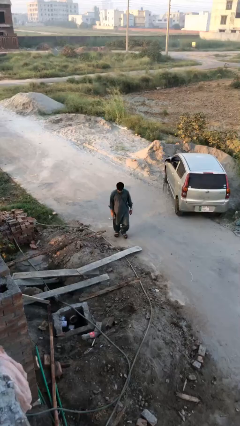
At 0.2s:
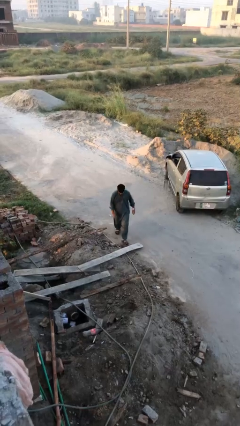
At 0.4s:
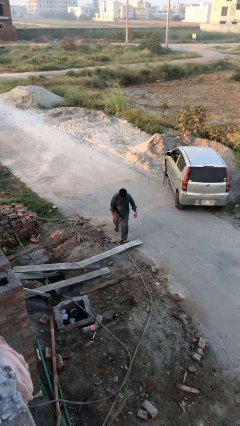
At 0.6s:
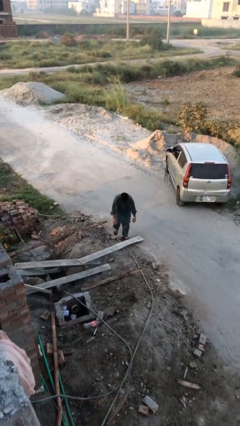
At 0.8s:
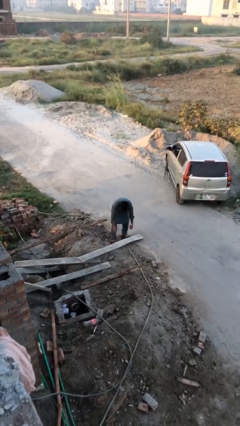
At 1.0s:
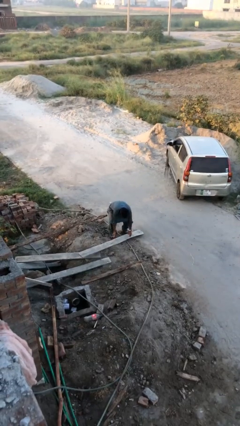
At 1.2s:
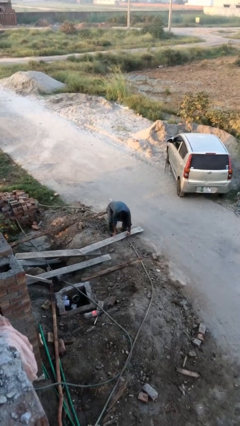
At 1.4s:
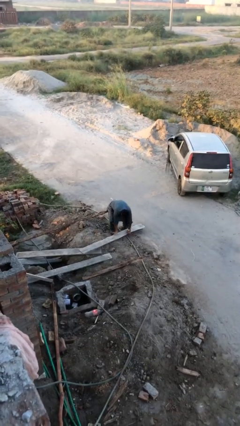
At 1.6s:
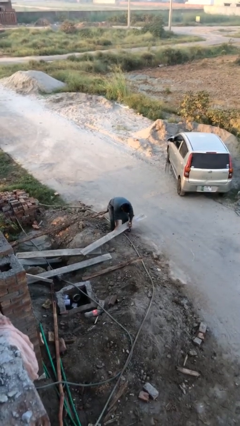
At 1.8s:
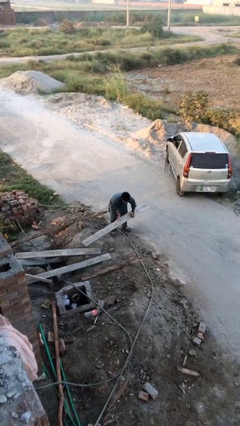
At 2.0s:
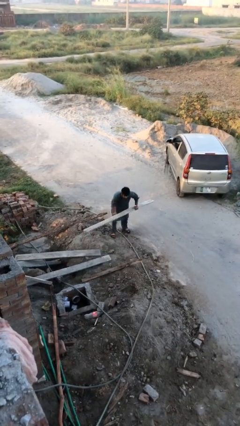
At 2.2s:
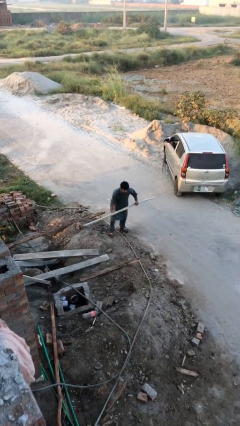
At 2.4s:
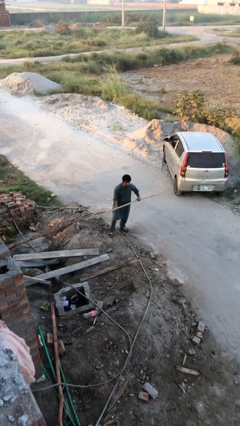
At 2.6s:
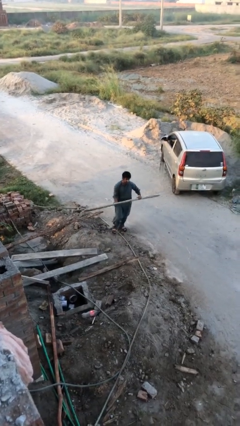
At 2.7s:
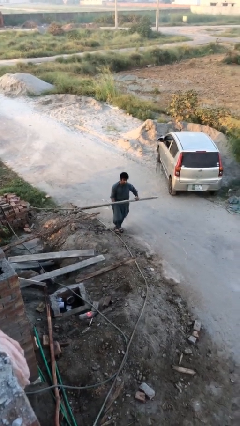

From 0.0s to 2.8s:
person picks up object from floor

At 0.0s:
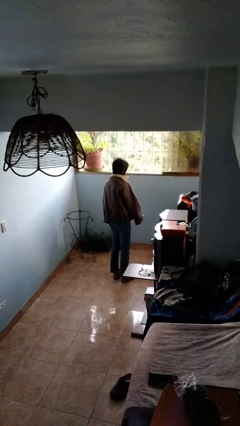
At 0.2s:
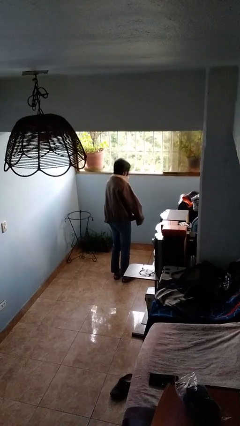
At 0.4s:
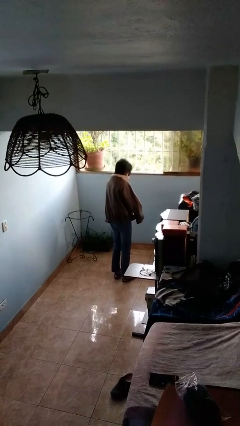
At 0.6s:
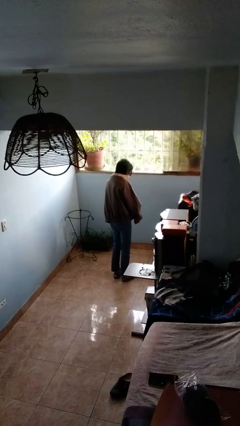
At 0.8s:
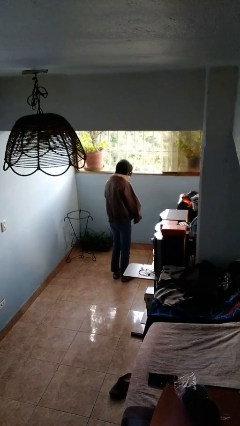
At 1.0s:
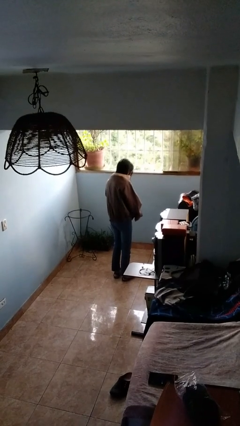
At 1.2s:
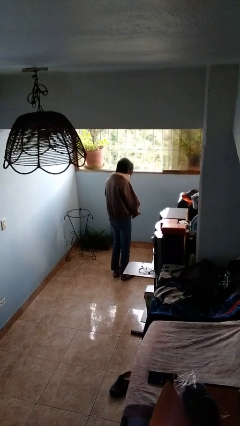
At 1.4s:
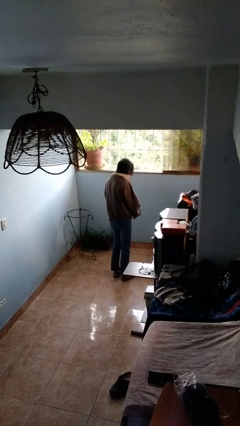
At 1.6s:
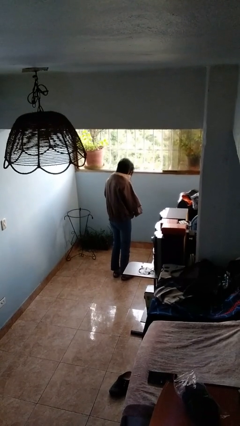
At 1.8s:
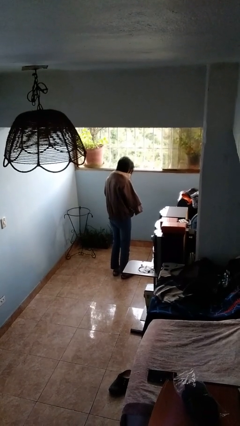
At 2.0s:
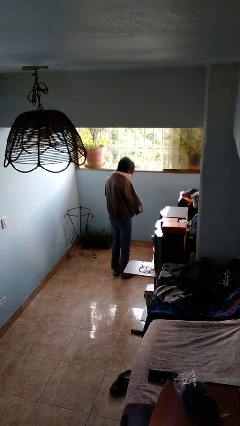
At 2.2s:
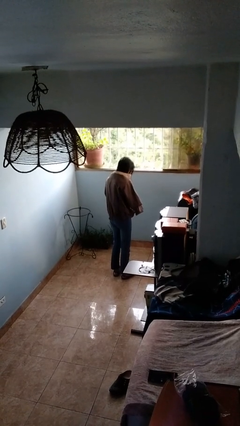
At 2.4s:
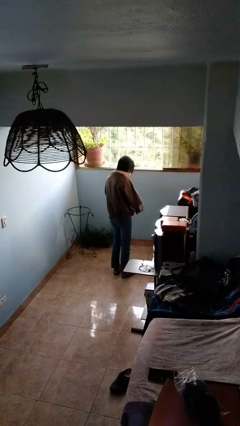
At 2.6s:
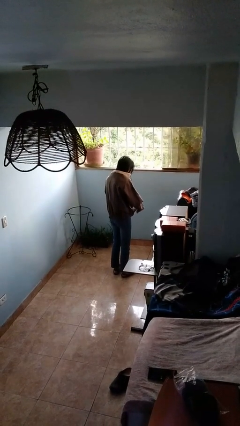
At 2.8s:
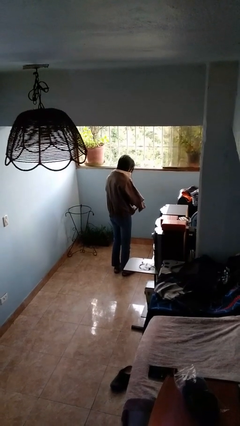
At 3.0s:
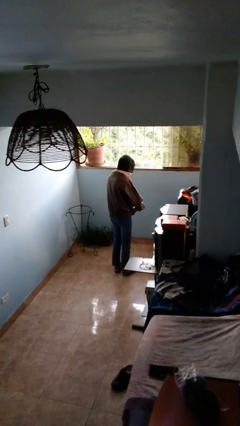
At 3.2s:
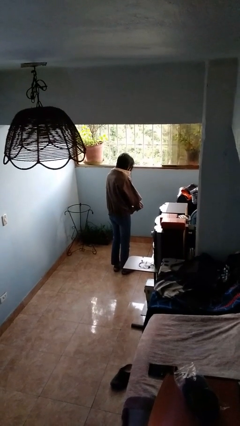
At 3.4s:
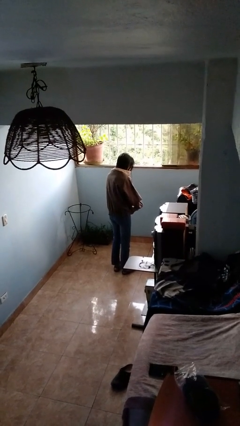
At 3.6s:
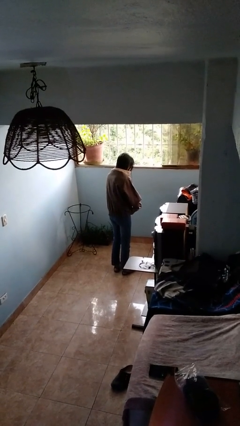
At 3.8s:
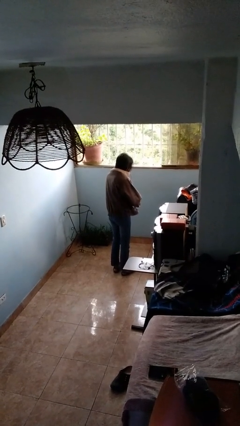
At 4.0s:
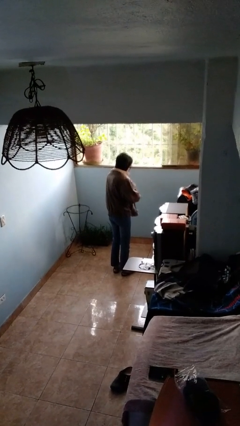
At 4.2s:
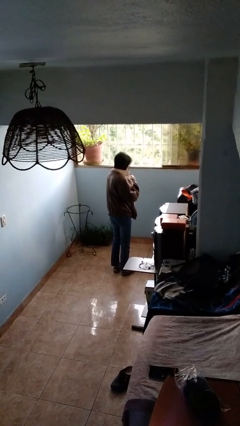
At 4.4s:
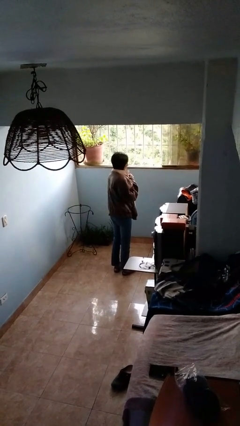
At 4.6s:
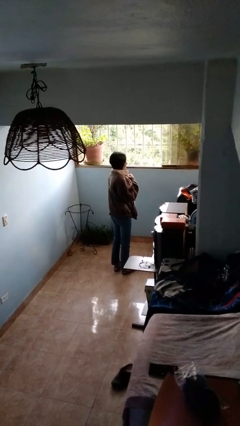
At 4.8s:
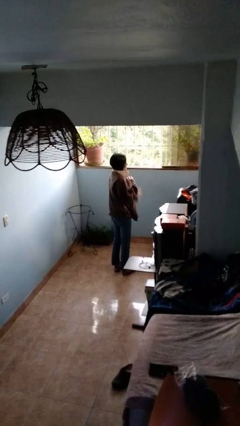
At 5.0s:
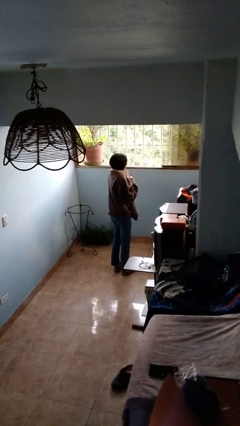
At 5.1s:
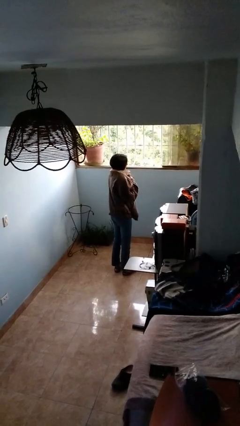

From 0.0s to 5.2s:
person zips up jacket

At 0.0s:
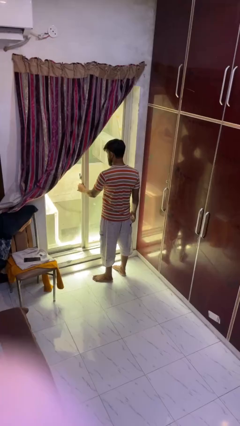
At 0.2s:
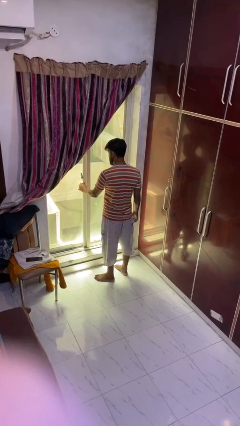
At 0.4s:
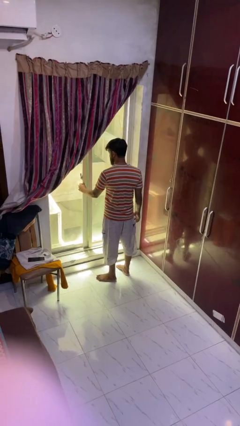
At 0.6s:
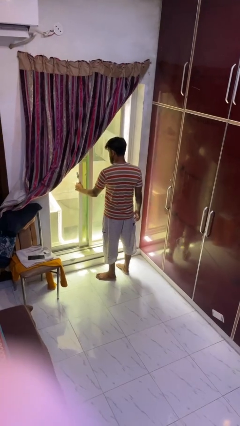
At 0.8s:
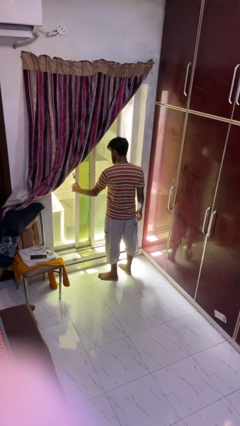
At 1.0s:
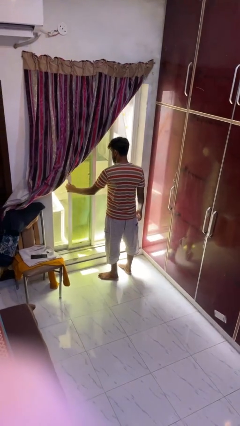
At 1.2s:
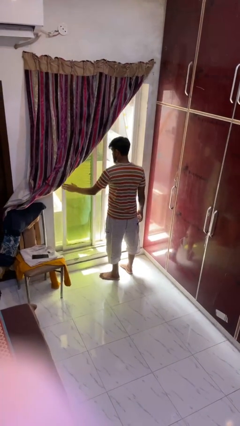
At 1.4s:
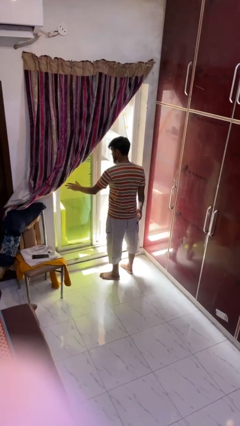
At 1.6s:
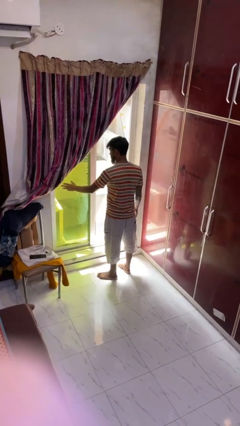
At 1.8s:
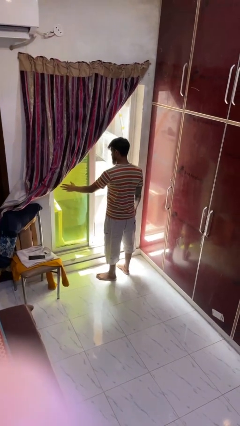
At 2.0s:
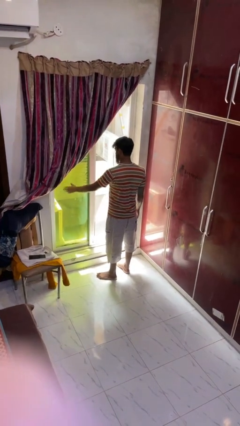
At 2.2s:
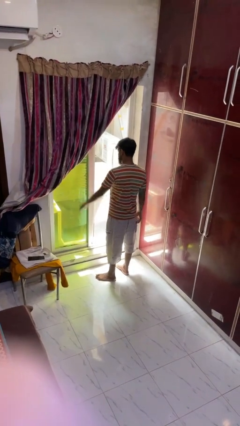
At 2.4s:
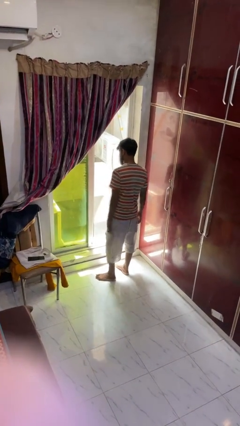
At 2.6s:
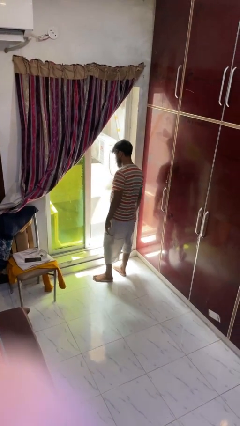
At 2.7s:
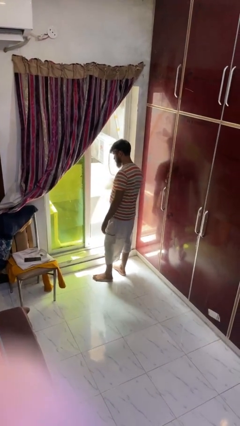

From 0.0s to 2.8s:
person opens home window

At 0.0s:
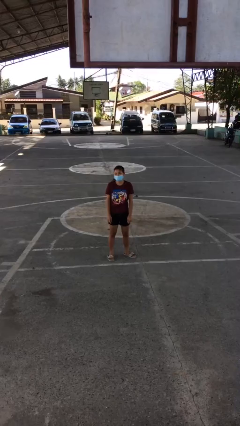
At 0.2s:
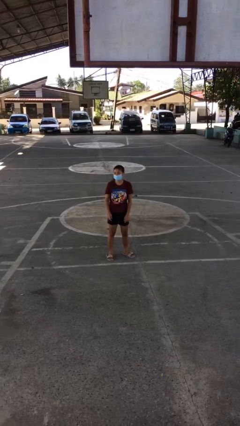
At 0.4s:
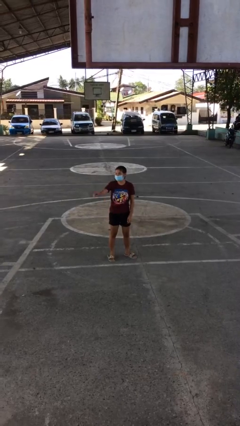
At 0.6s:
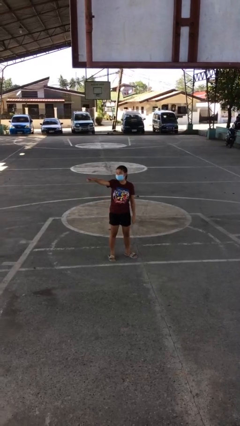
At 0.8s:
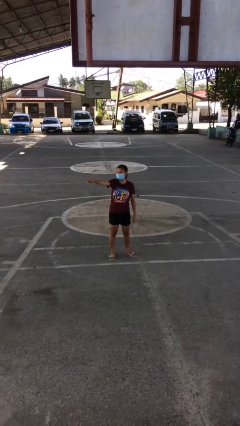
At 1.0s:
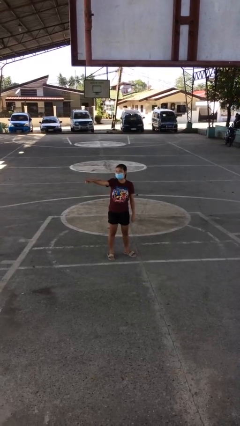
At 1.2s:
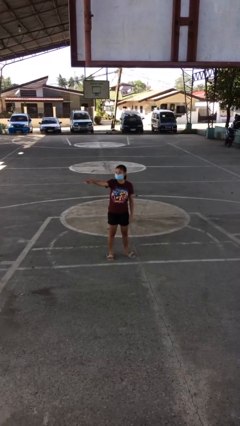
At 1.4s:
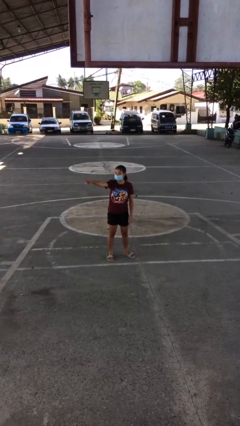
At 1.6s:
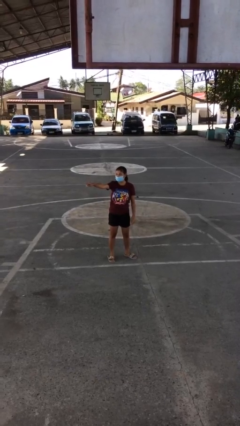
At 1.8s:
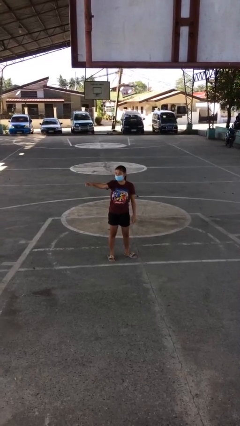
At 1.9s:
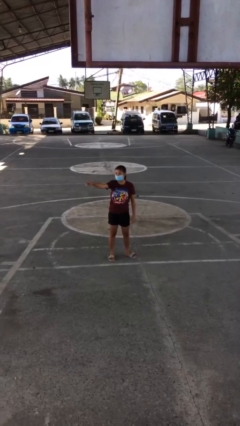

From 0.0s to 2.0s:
person points at person

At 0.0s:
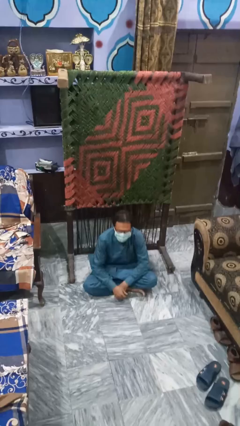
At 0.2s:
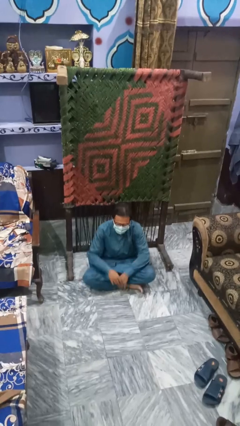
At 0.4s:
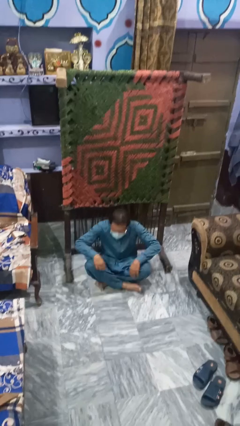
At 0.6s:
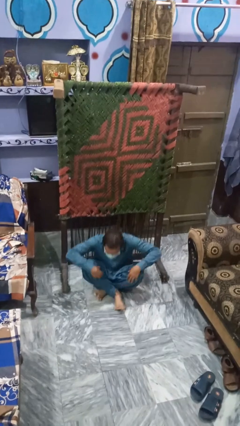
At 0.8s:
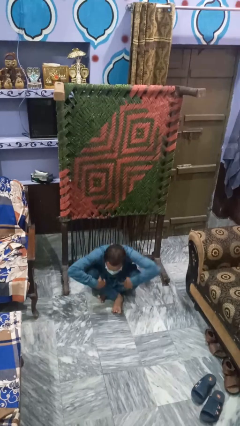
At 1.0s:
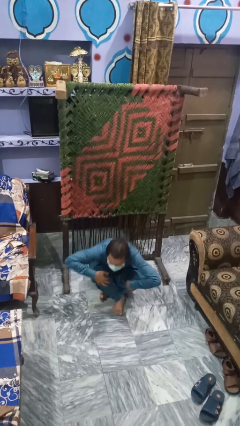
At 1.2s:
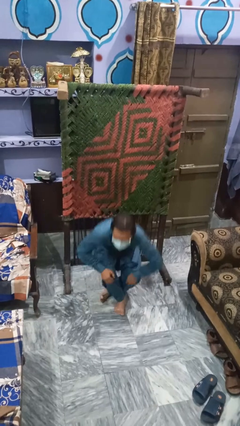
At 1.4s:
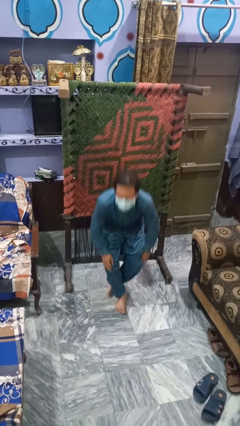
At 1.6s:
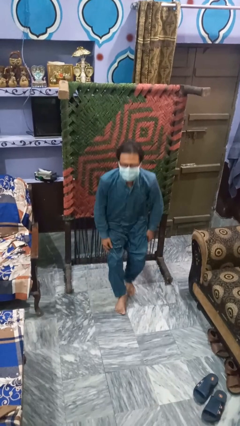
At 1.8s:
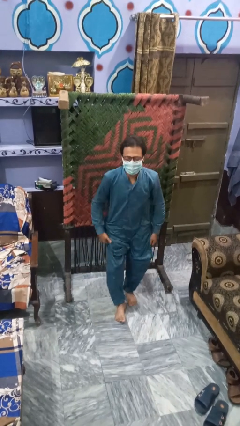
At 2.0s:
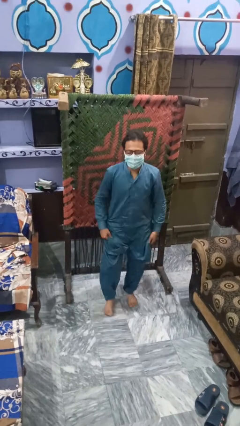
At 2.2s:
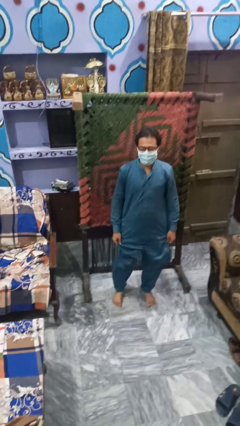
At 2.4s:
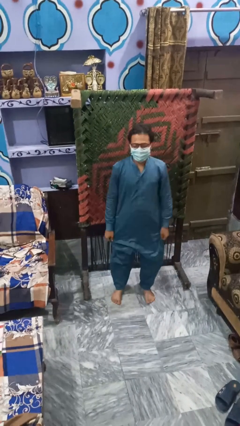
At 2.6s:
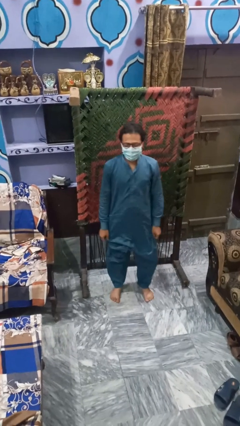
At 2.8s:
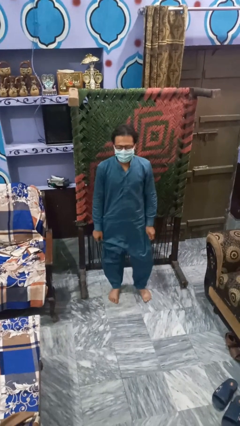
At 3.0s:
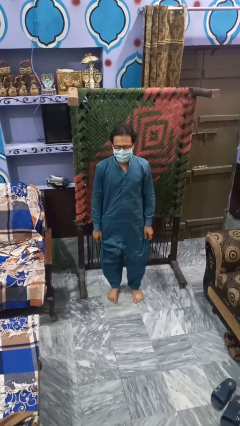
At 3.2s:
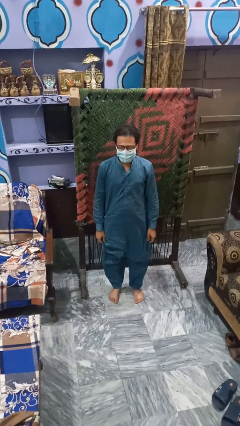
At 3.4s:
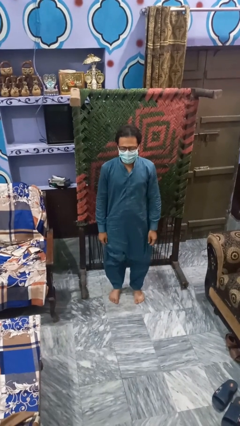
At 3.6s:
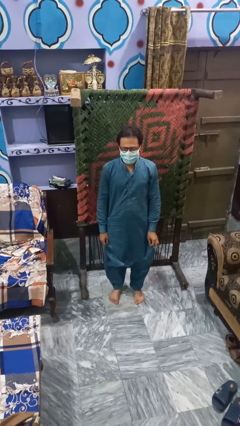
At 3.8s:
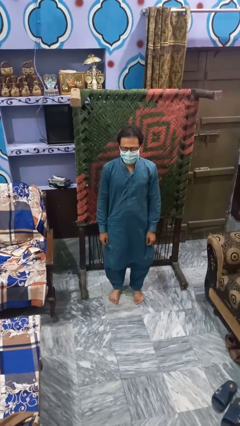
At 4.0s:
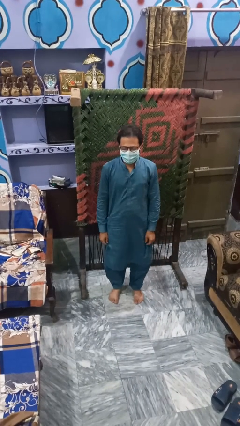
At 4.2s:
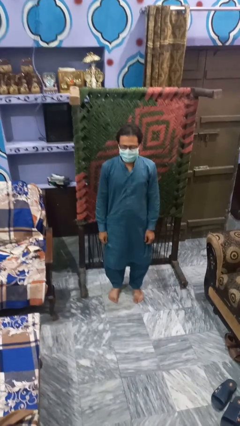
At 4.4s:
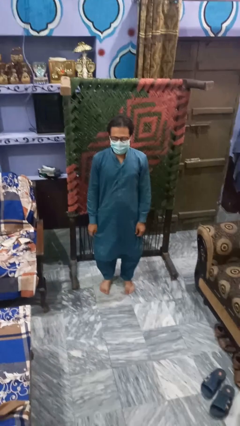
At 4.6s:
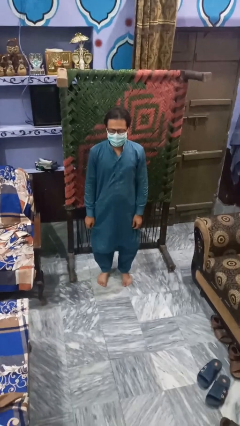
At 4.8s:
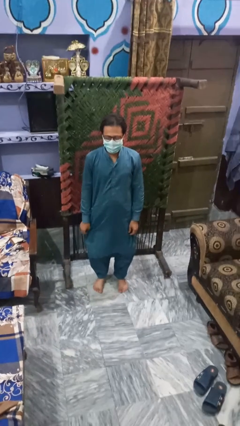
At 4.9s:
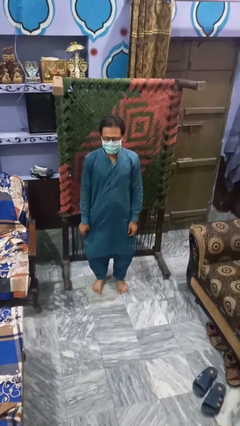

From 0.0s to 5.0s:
person stands up from floor
